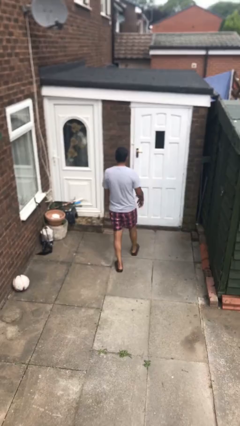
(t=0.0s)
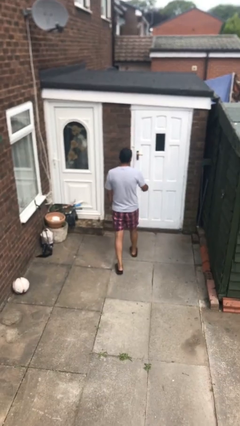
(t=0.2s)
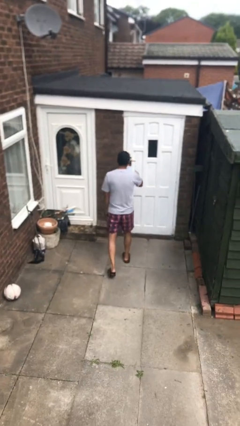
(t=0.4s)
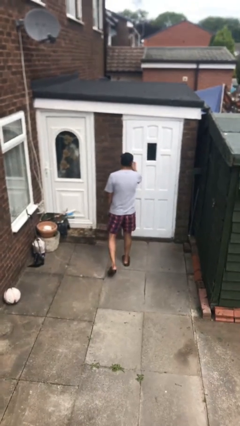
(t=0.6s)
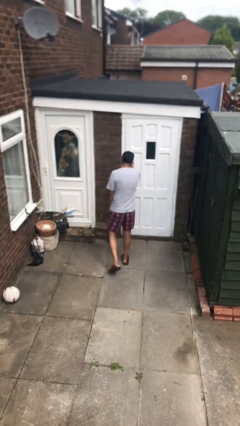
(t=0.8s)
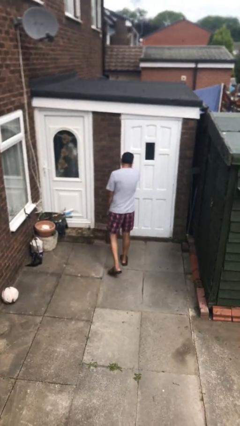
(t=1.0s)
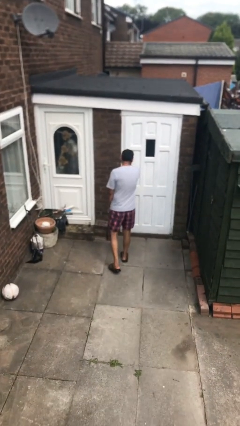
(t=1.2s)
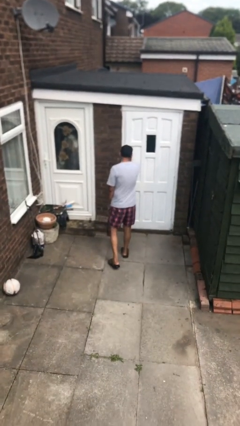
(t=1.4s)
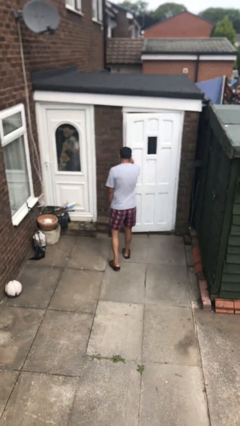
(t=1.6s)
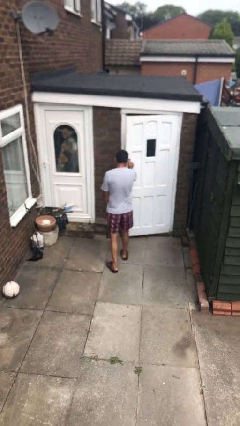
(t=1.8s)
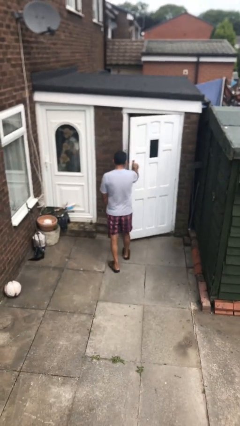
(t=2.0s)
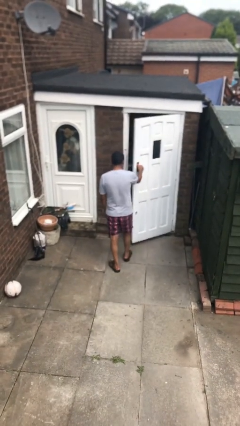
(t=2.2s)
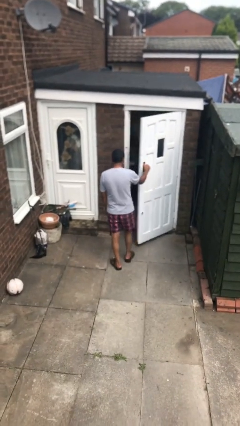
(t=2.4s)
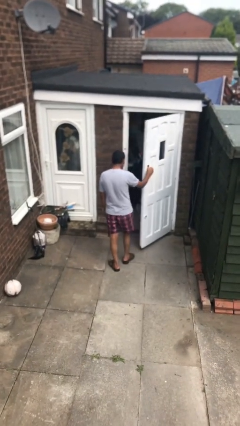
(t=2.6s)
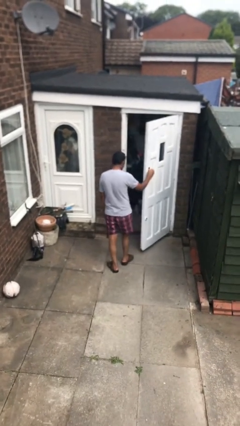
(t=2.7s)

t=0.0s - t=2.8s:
person opens facility door

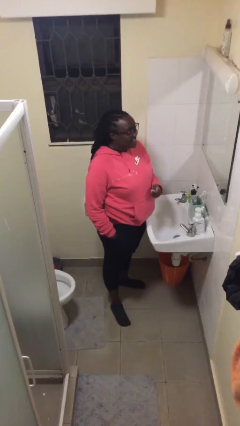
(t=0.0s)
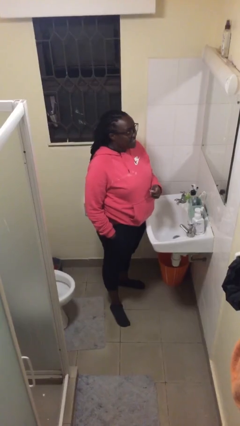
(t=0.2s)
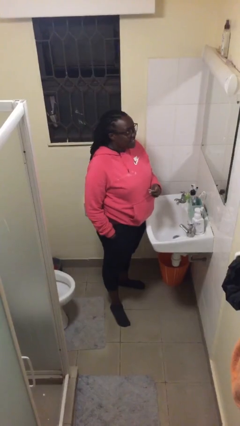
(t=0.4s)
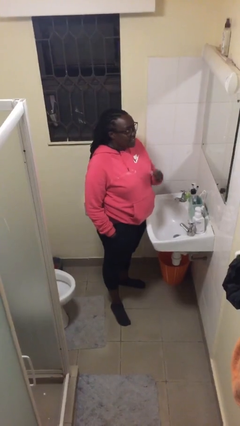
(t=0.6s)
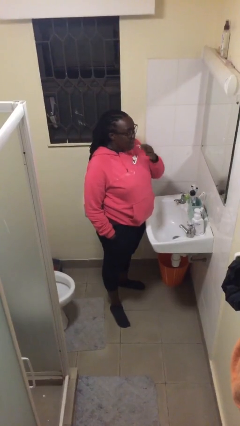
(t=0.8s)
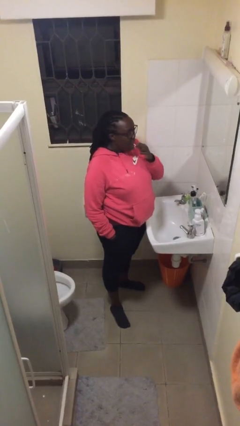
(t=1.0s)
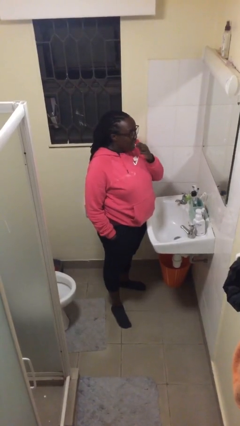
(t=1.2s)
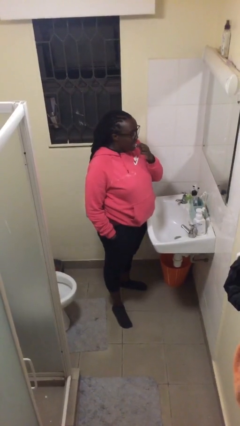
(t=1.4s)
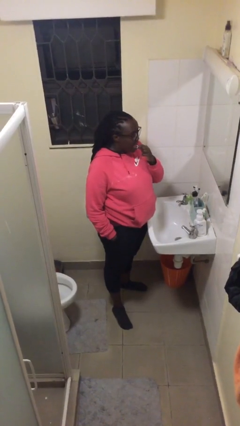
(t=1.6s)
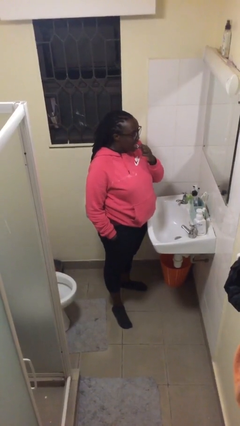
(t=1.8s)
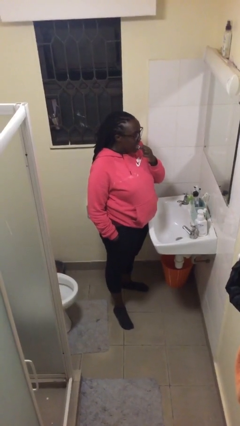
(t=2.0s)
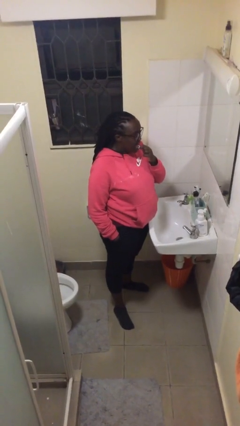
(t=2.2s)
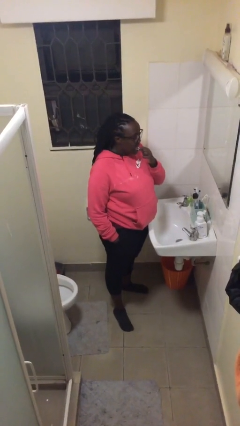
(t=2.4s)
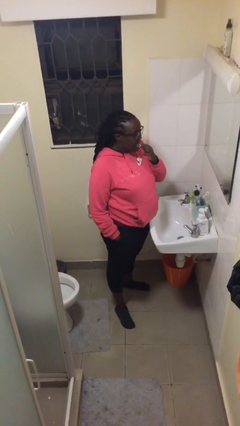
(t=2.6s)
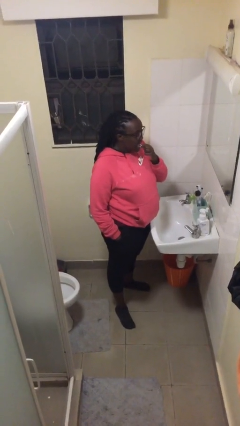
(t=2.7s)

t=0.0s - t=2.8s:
person flosses

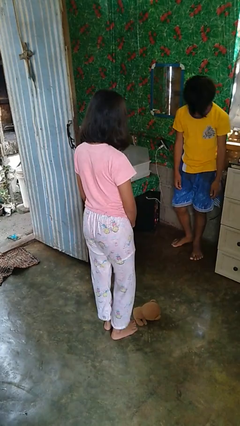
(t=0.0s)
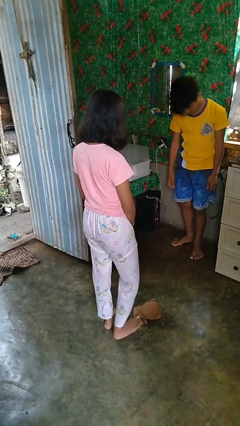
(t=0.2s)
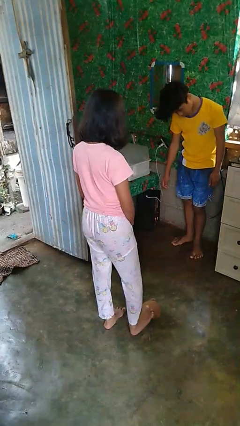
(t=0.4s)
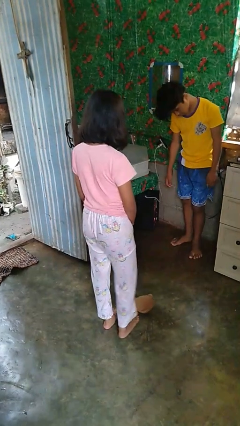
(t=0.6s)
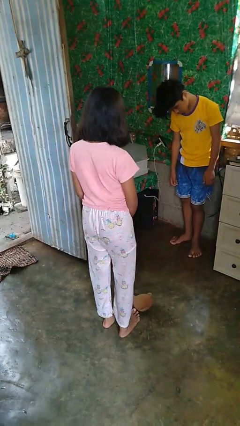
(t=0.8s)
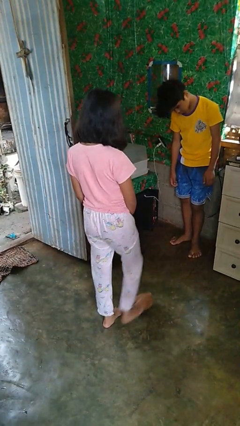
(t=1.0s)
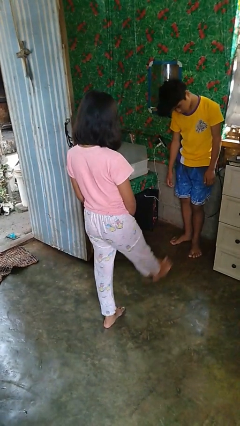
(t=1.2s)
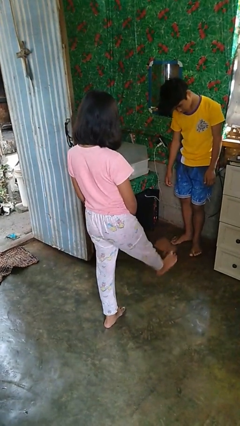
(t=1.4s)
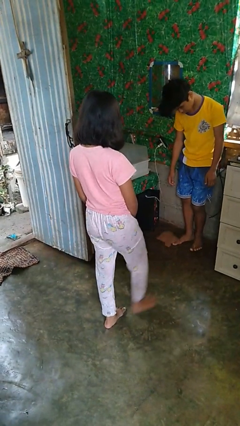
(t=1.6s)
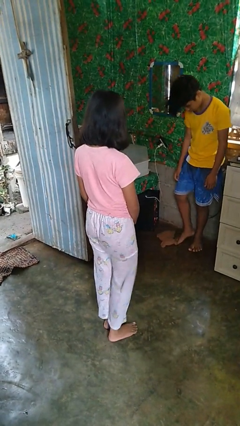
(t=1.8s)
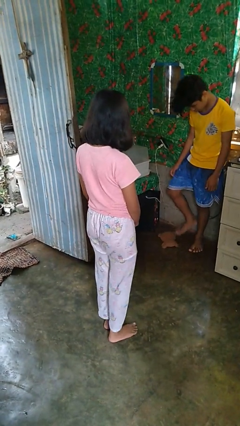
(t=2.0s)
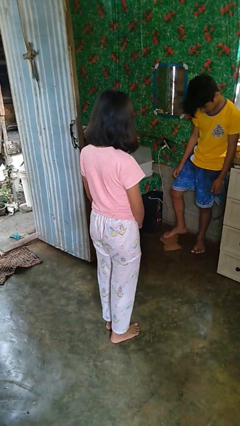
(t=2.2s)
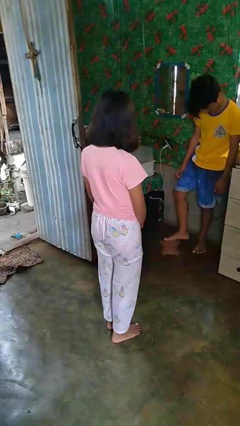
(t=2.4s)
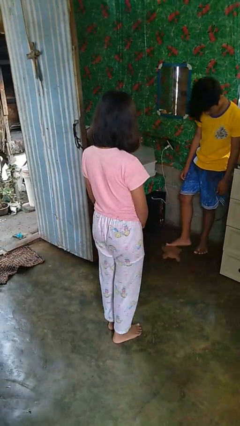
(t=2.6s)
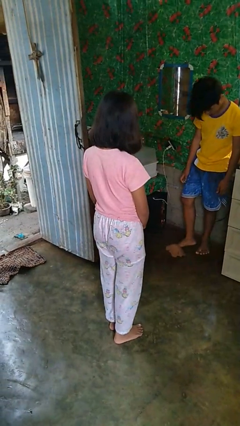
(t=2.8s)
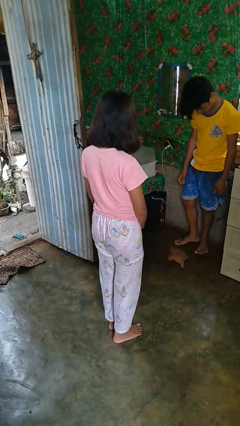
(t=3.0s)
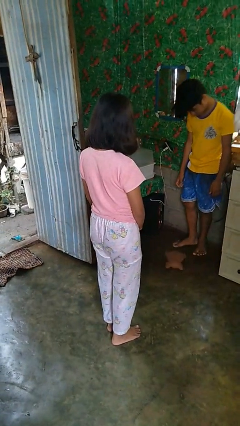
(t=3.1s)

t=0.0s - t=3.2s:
person kicks object to person

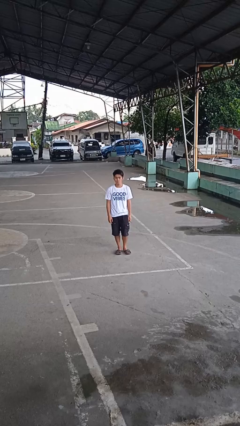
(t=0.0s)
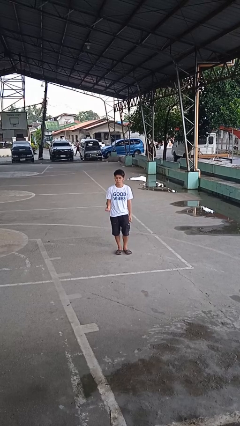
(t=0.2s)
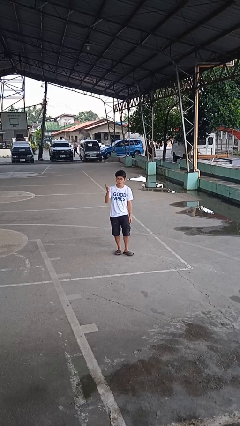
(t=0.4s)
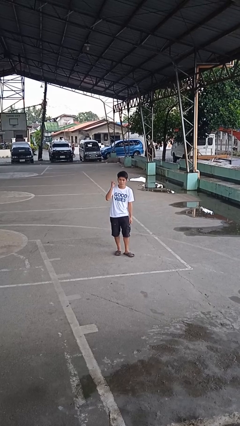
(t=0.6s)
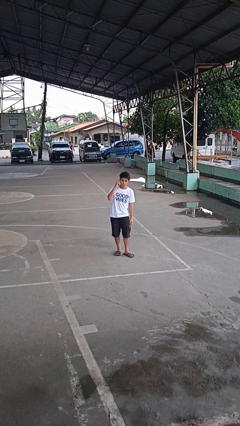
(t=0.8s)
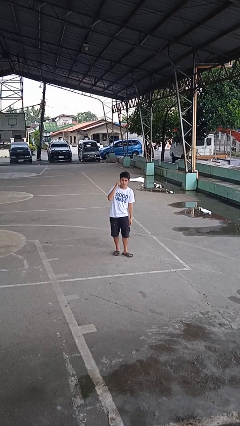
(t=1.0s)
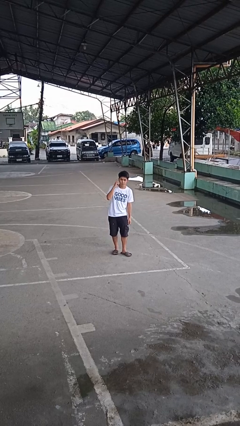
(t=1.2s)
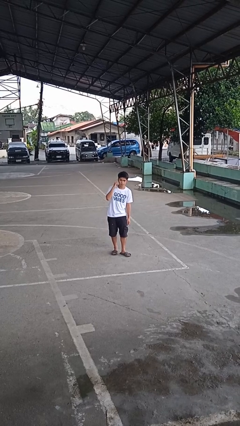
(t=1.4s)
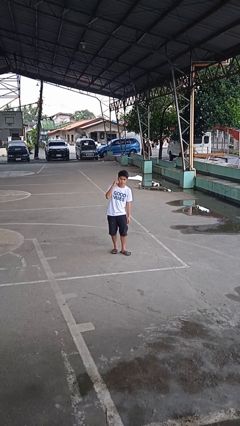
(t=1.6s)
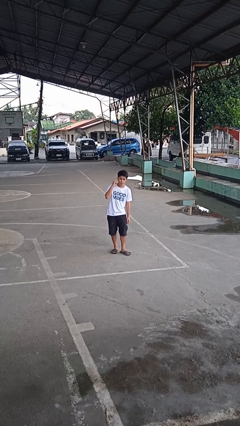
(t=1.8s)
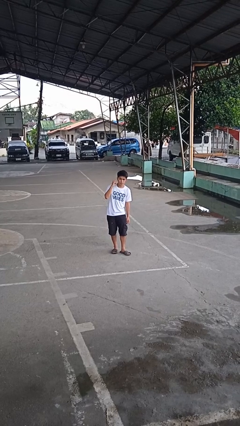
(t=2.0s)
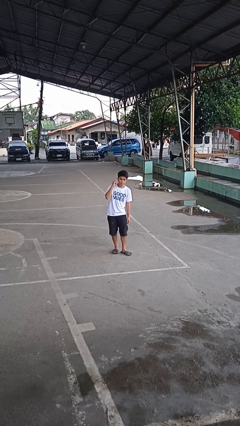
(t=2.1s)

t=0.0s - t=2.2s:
person gestures listen closely

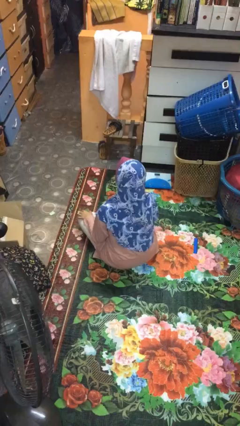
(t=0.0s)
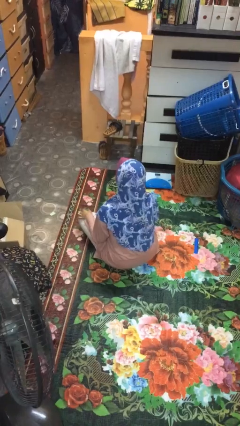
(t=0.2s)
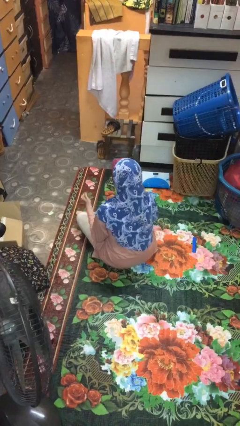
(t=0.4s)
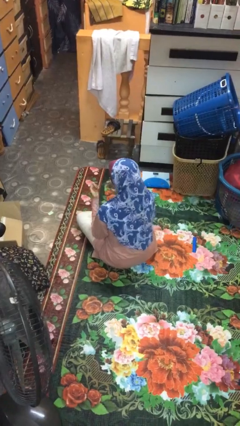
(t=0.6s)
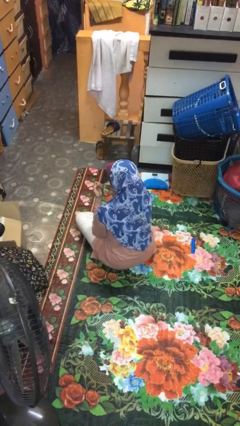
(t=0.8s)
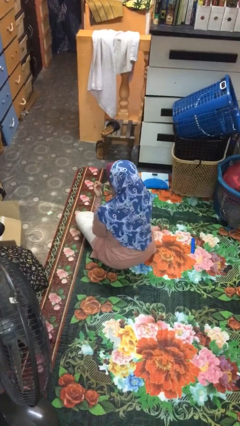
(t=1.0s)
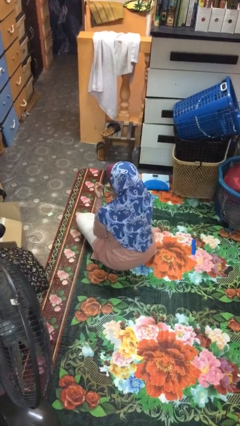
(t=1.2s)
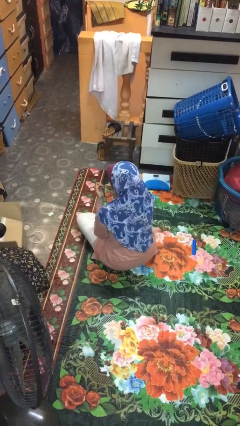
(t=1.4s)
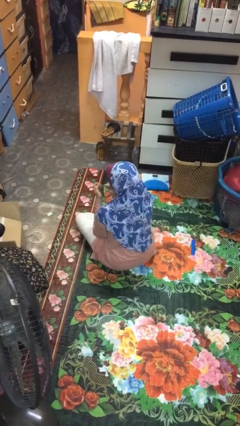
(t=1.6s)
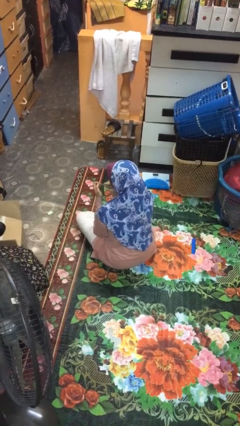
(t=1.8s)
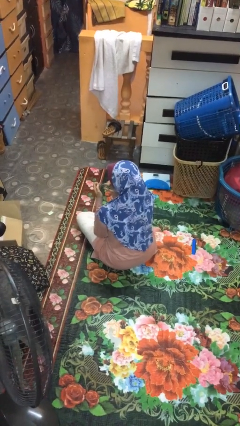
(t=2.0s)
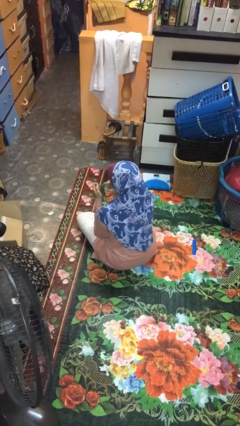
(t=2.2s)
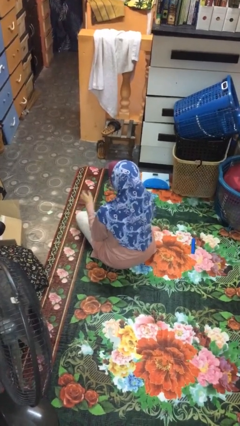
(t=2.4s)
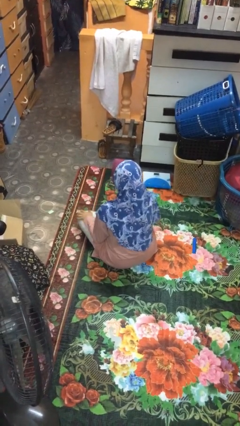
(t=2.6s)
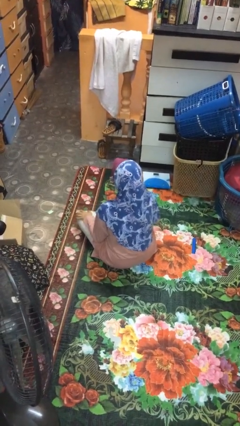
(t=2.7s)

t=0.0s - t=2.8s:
person clips fingernails

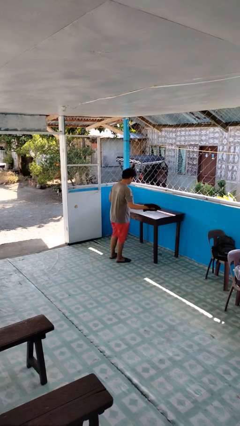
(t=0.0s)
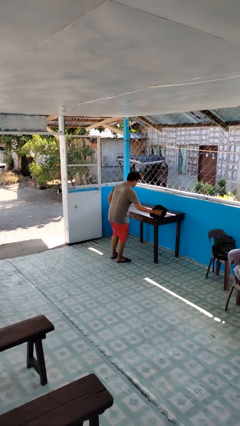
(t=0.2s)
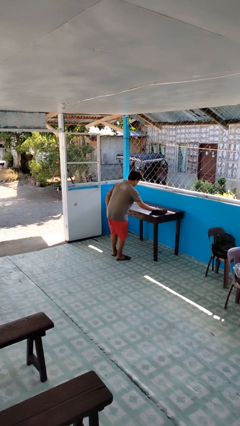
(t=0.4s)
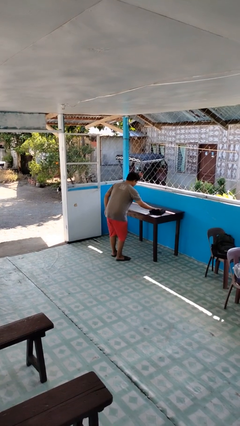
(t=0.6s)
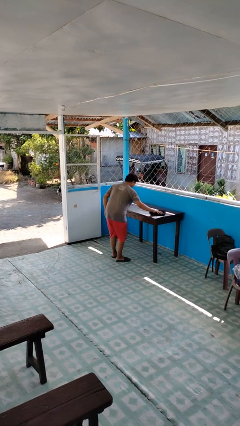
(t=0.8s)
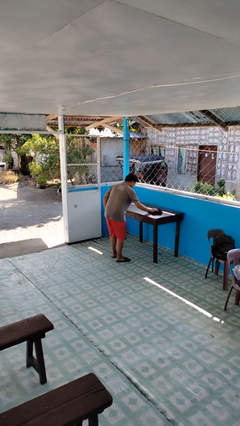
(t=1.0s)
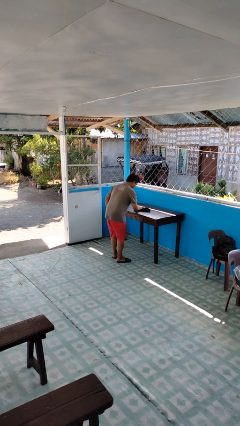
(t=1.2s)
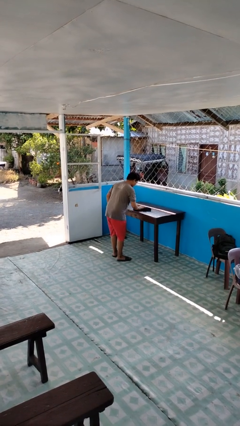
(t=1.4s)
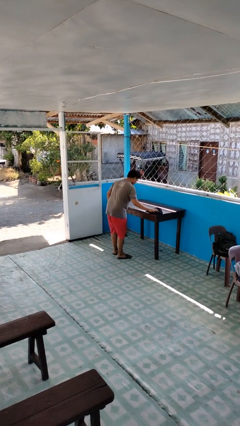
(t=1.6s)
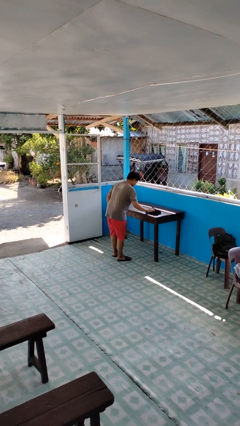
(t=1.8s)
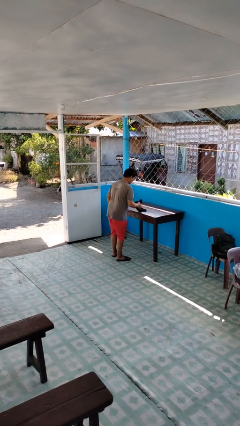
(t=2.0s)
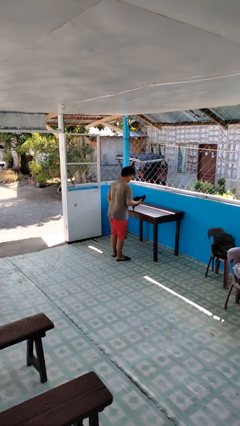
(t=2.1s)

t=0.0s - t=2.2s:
person cleans table with rag

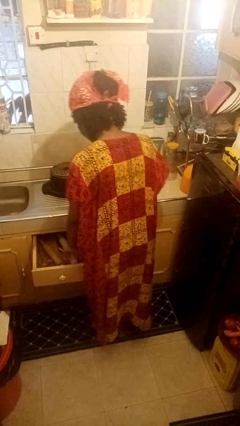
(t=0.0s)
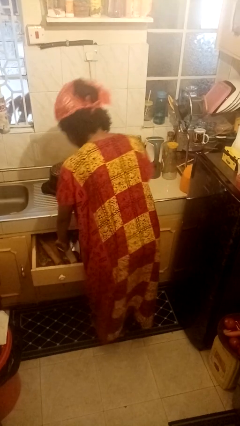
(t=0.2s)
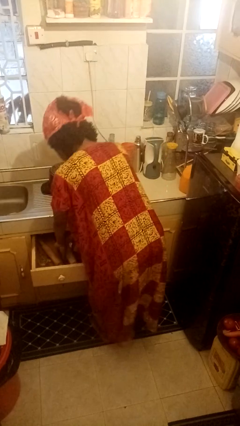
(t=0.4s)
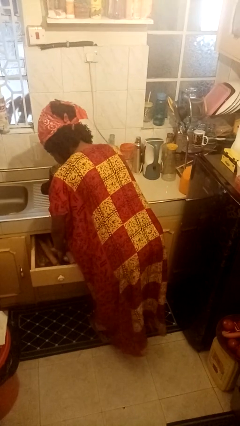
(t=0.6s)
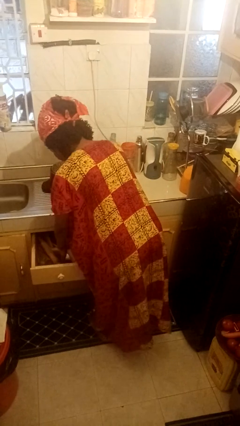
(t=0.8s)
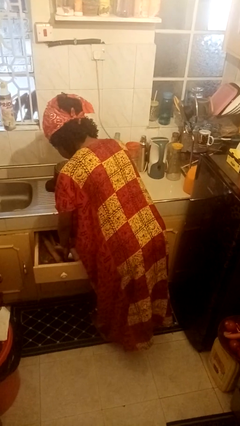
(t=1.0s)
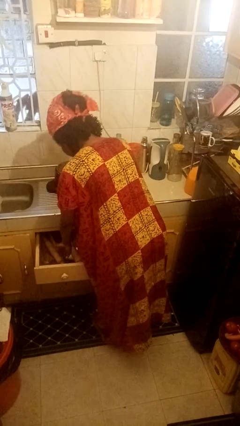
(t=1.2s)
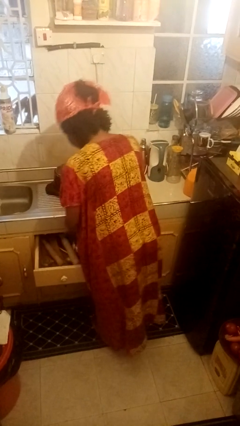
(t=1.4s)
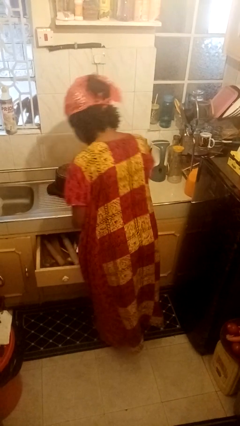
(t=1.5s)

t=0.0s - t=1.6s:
person searches in kitchen drawer
